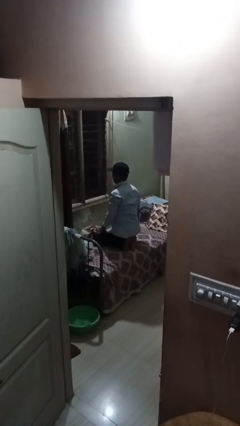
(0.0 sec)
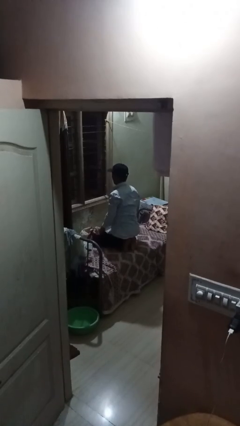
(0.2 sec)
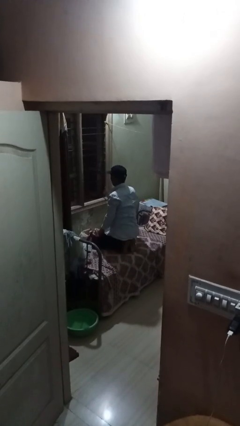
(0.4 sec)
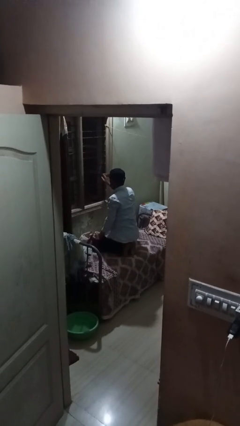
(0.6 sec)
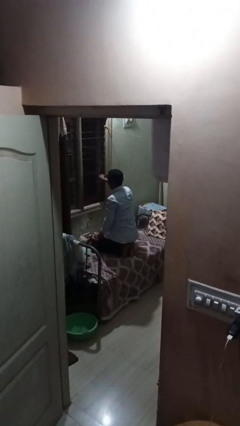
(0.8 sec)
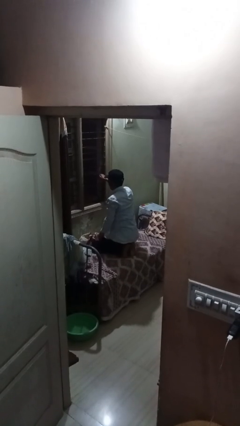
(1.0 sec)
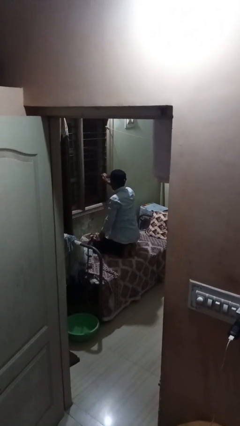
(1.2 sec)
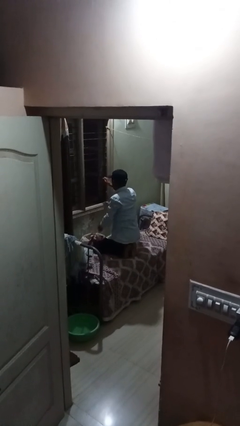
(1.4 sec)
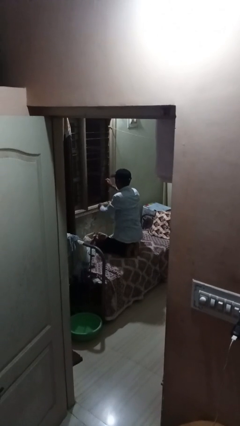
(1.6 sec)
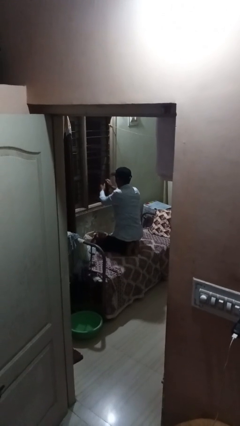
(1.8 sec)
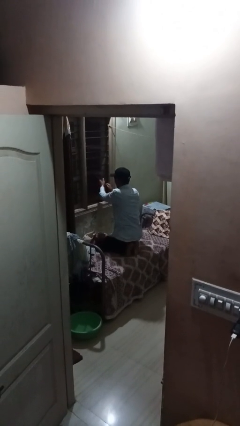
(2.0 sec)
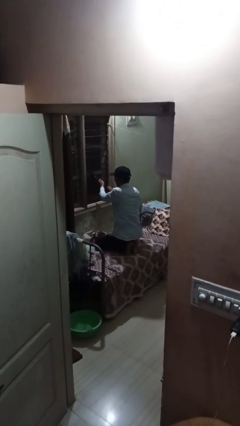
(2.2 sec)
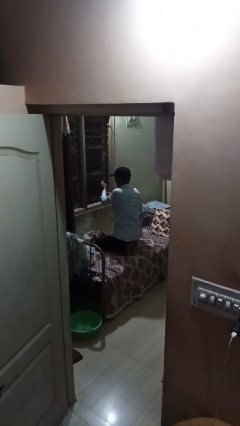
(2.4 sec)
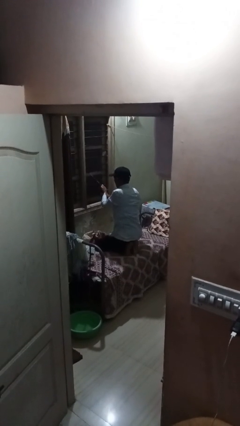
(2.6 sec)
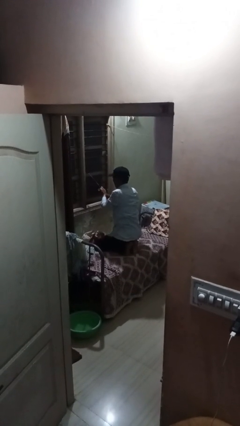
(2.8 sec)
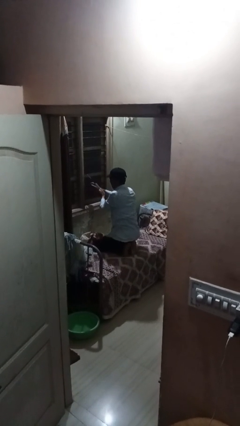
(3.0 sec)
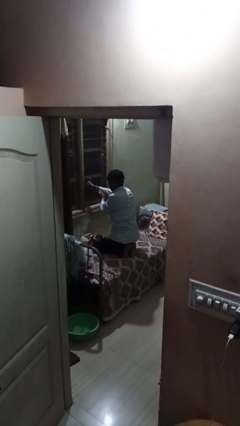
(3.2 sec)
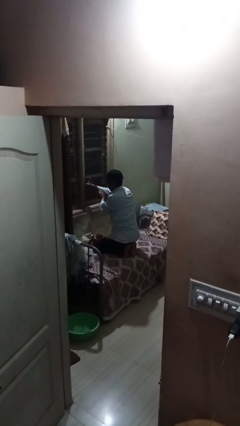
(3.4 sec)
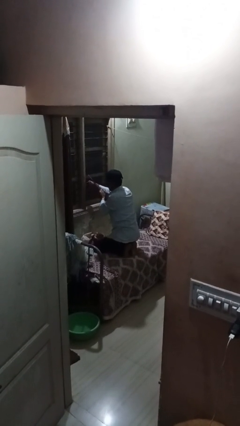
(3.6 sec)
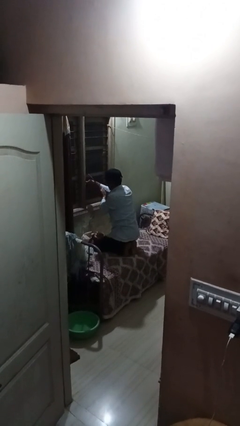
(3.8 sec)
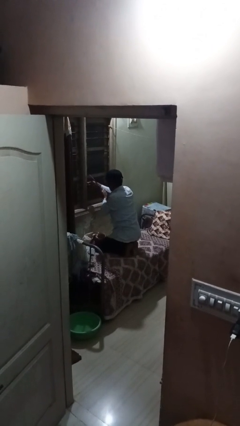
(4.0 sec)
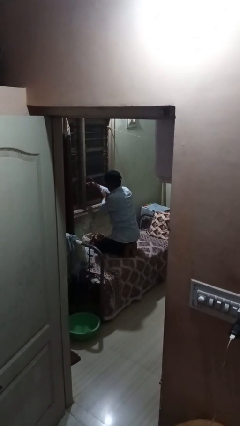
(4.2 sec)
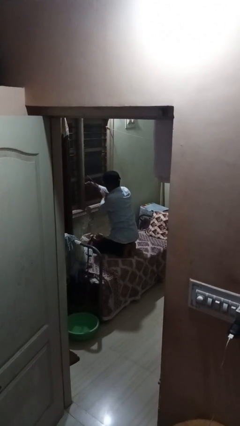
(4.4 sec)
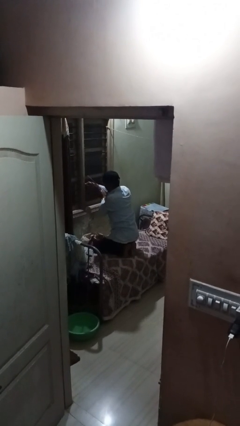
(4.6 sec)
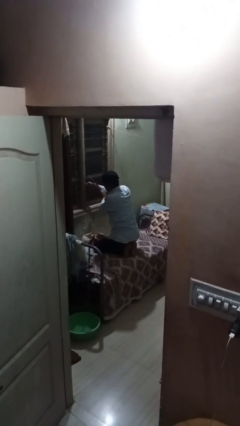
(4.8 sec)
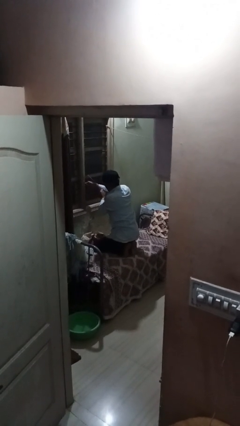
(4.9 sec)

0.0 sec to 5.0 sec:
person closes home window

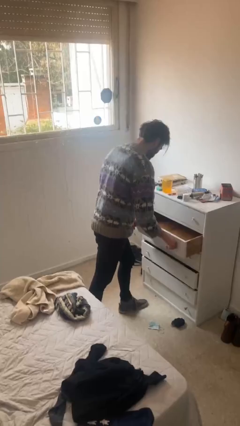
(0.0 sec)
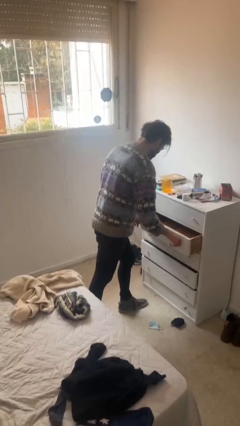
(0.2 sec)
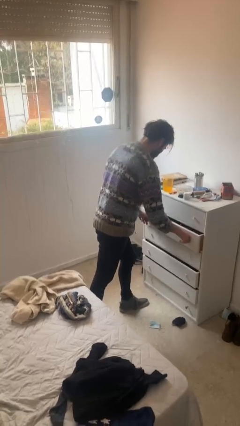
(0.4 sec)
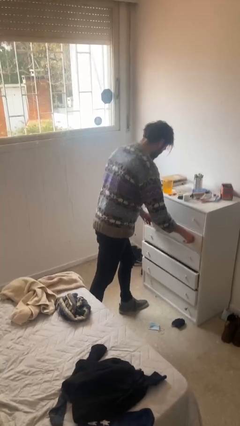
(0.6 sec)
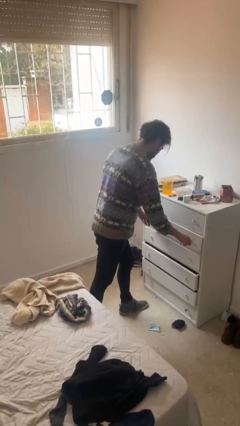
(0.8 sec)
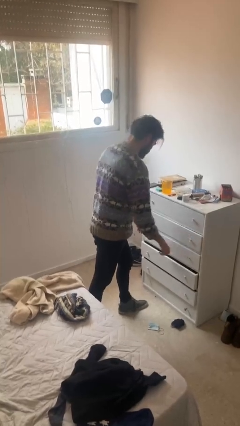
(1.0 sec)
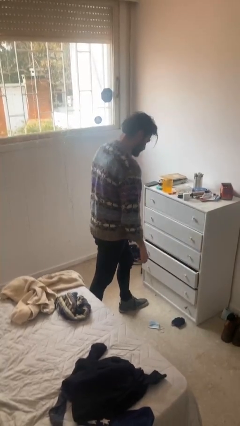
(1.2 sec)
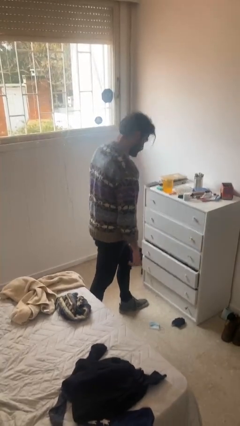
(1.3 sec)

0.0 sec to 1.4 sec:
person closes dresser drawer

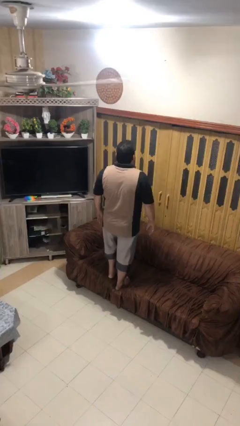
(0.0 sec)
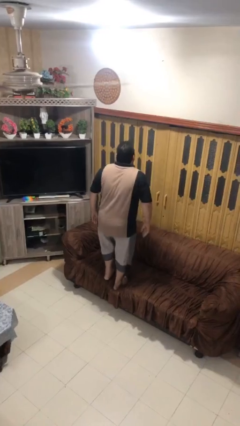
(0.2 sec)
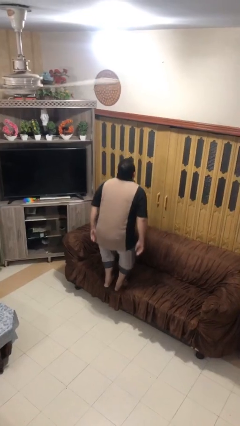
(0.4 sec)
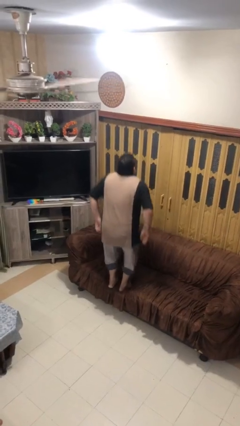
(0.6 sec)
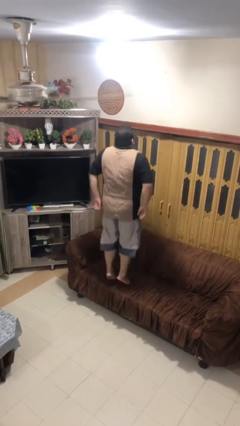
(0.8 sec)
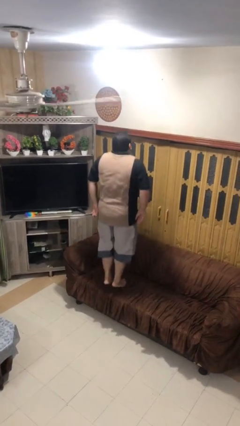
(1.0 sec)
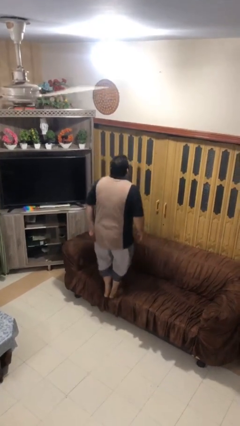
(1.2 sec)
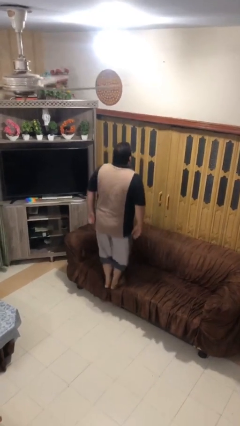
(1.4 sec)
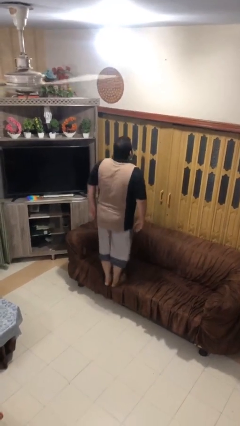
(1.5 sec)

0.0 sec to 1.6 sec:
person jumps on couch

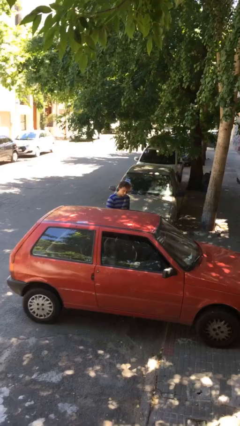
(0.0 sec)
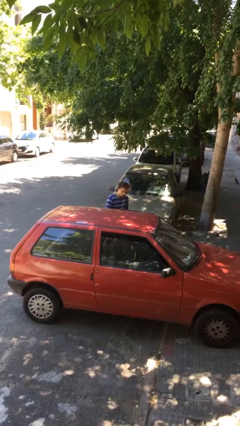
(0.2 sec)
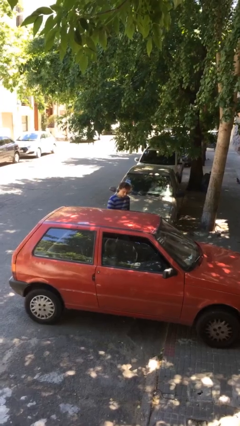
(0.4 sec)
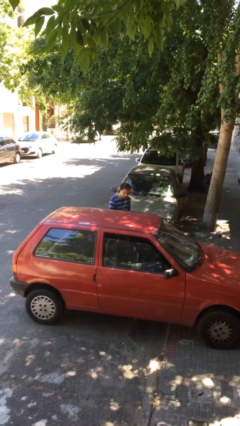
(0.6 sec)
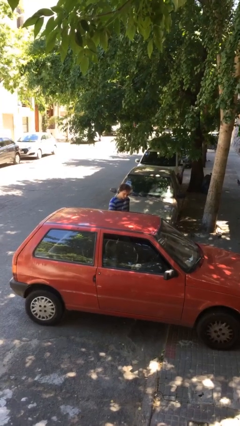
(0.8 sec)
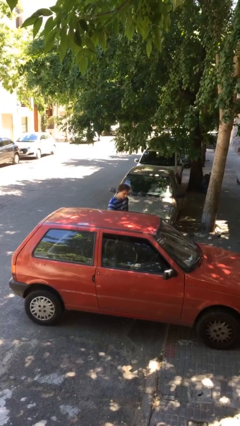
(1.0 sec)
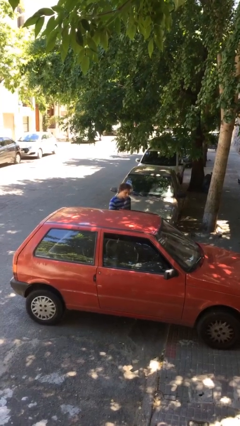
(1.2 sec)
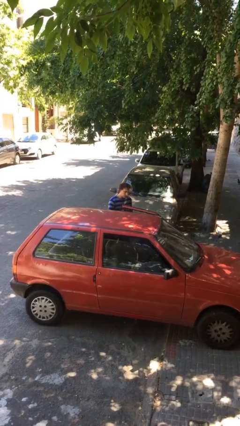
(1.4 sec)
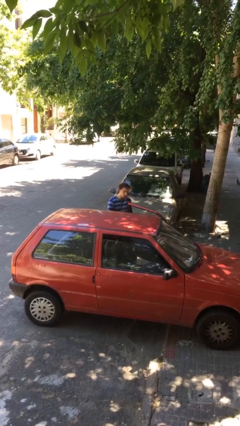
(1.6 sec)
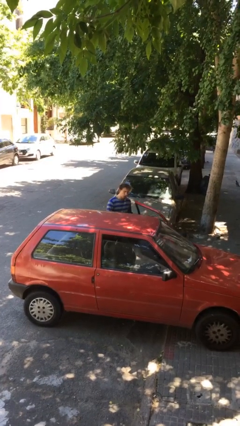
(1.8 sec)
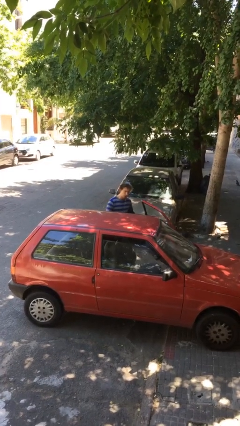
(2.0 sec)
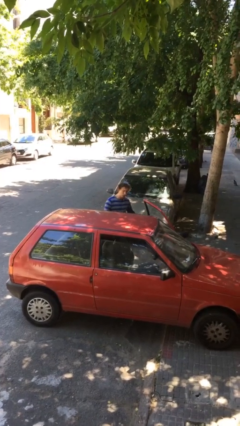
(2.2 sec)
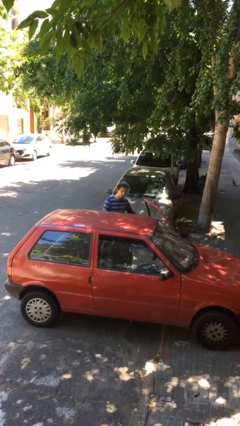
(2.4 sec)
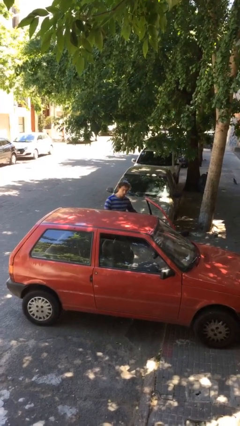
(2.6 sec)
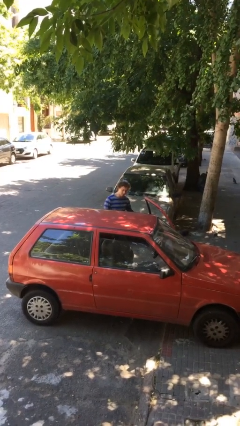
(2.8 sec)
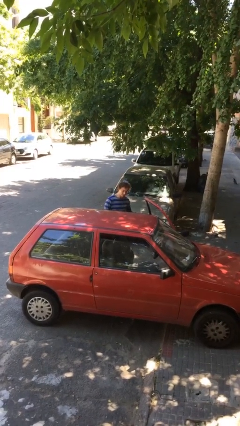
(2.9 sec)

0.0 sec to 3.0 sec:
person opens car door

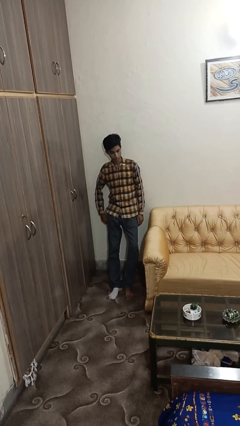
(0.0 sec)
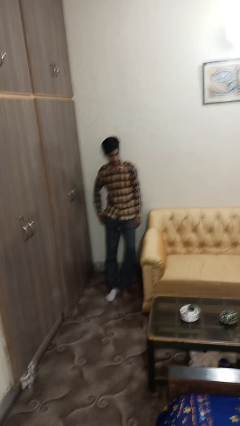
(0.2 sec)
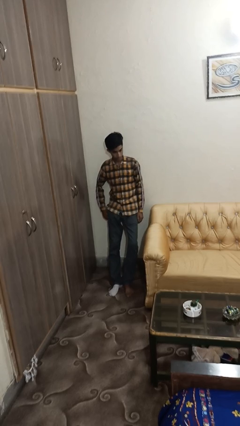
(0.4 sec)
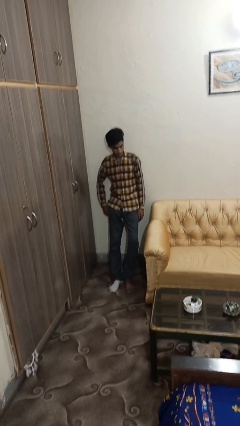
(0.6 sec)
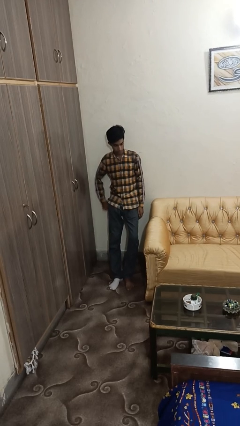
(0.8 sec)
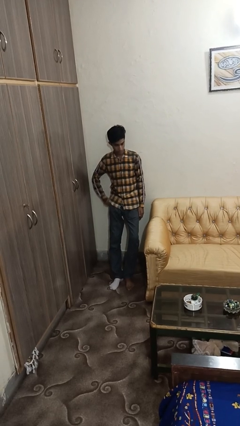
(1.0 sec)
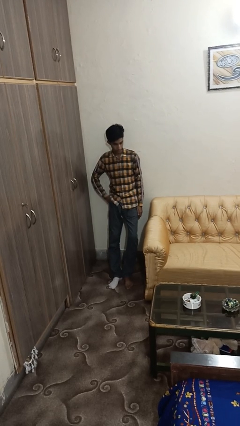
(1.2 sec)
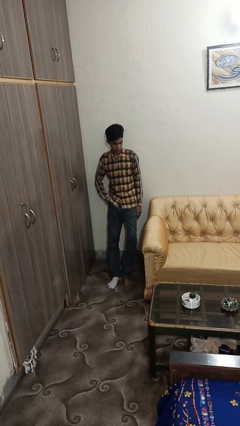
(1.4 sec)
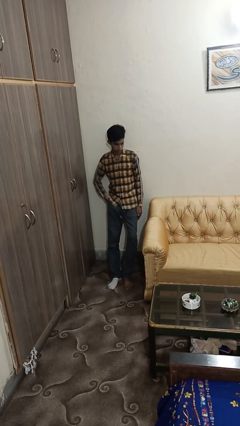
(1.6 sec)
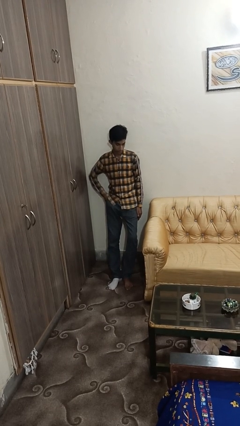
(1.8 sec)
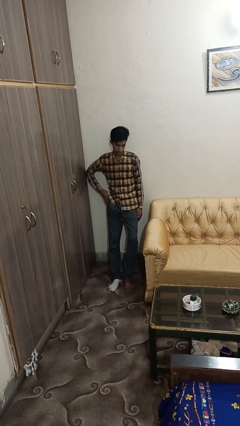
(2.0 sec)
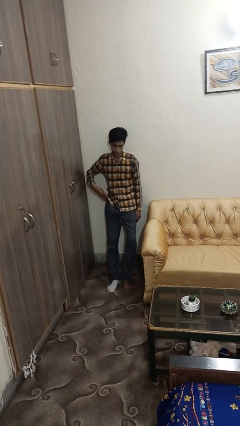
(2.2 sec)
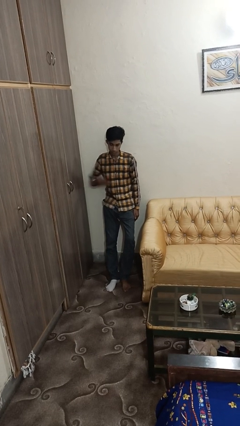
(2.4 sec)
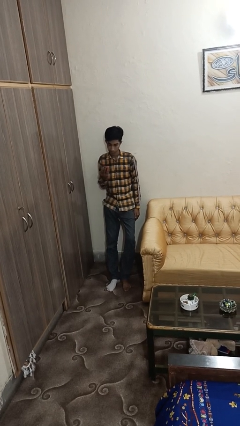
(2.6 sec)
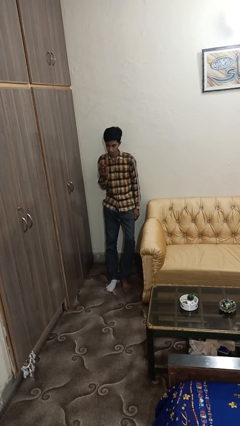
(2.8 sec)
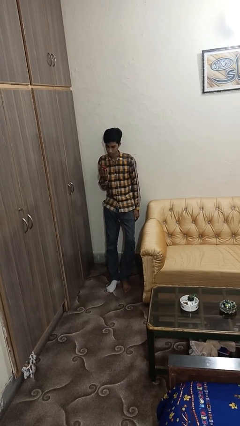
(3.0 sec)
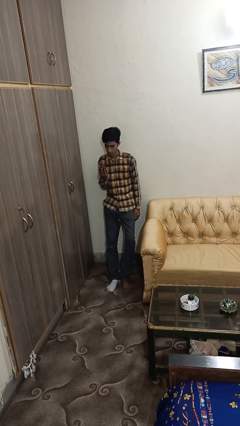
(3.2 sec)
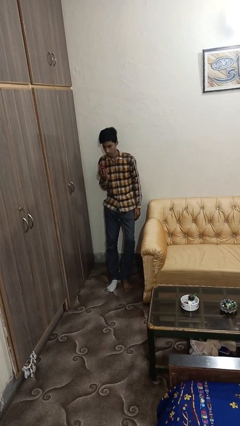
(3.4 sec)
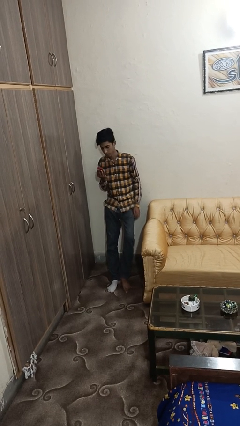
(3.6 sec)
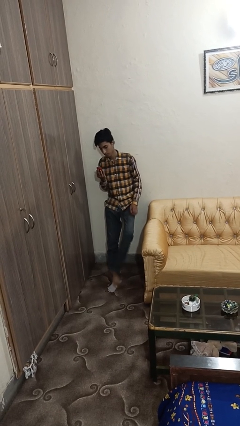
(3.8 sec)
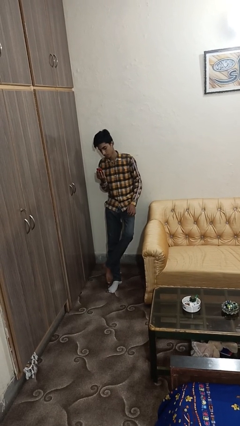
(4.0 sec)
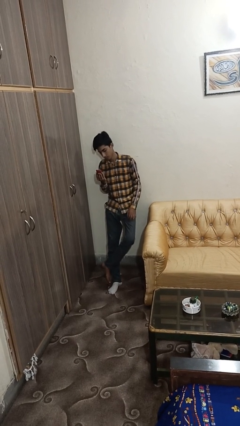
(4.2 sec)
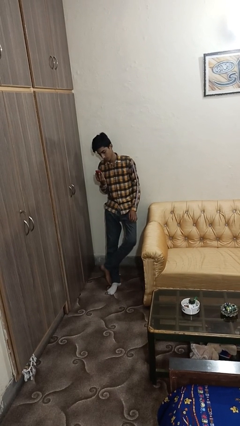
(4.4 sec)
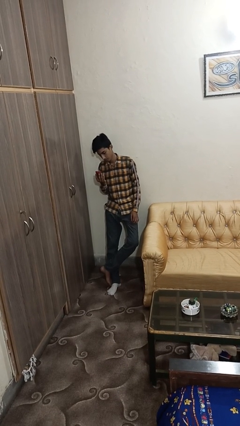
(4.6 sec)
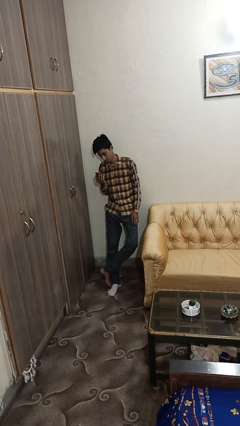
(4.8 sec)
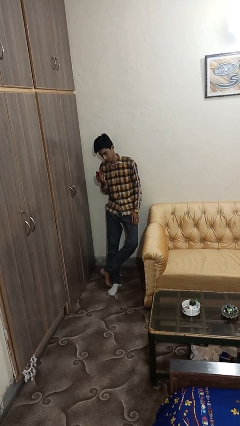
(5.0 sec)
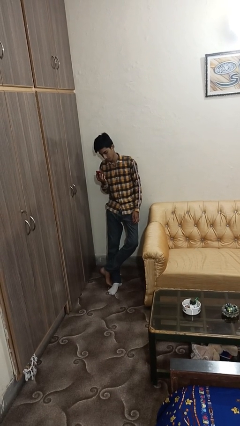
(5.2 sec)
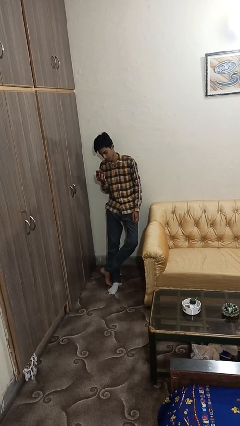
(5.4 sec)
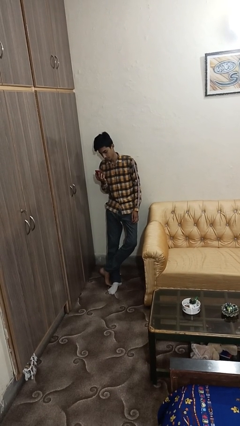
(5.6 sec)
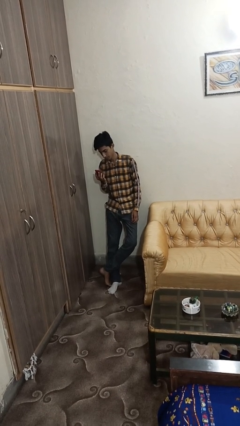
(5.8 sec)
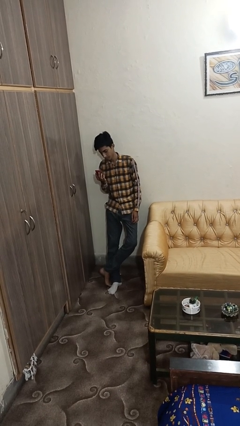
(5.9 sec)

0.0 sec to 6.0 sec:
person takes phone from pocket

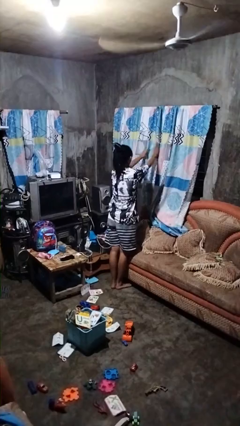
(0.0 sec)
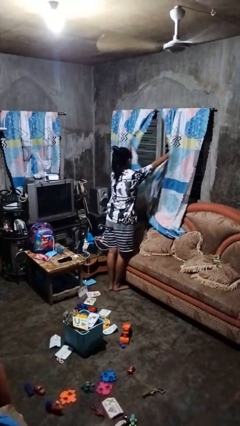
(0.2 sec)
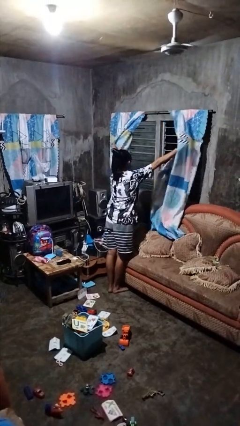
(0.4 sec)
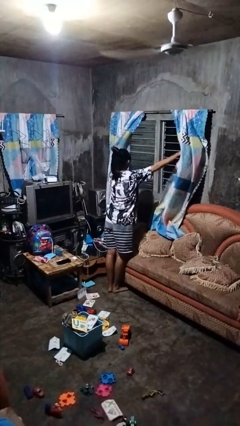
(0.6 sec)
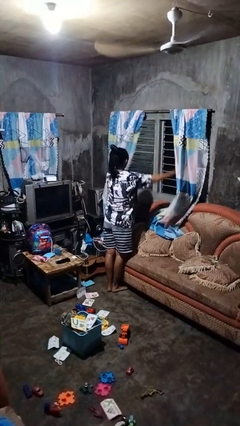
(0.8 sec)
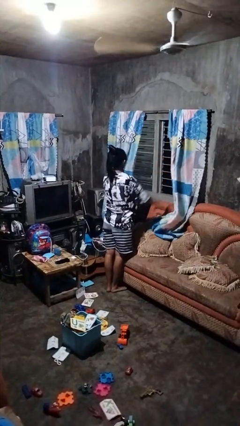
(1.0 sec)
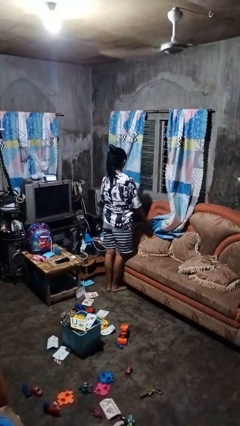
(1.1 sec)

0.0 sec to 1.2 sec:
person opens curtains
